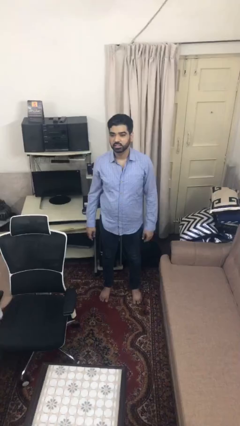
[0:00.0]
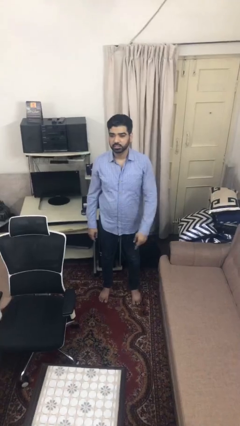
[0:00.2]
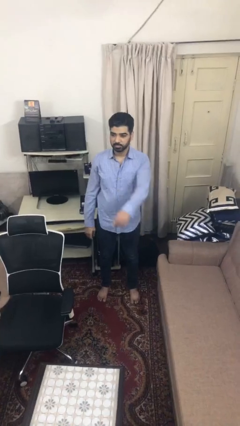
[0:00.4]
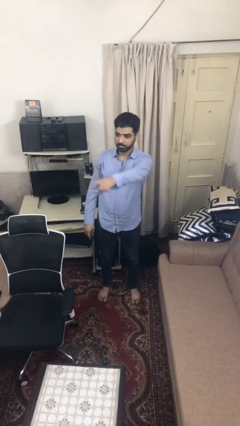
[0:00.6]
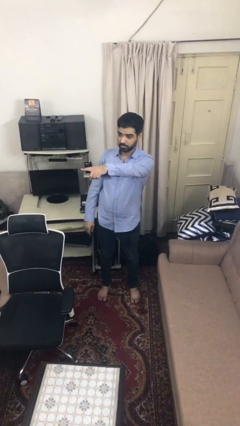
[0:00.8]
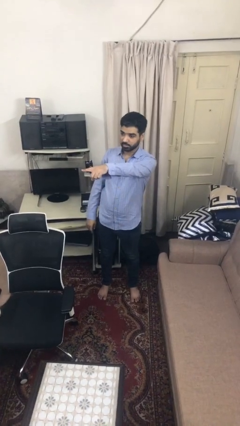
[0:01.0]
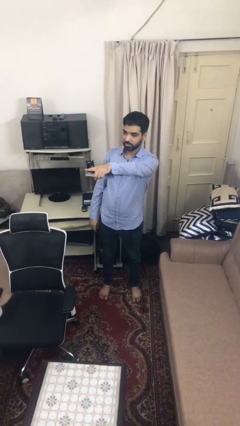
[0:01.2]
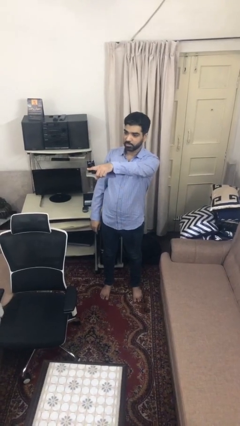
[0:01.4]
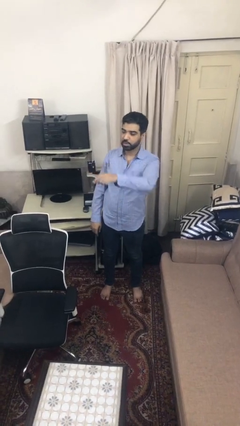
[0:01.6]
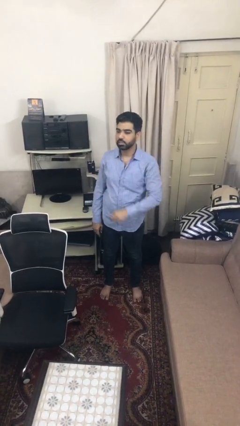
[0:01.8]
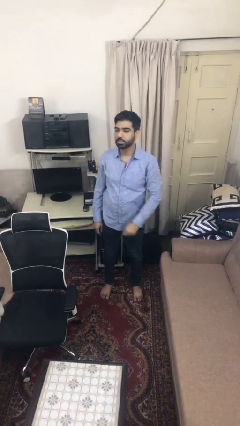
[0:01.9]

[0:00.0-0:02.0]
person points at person

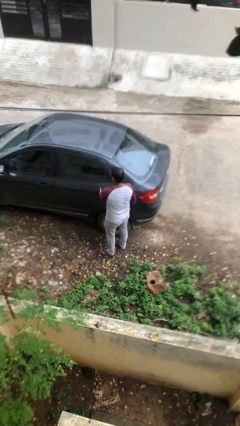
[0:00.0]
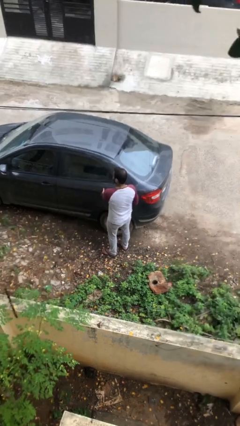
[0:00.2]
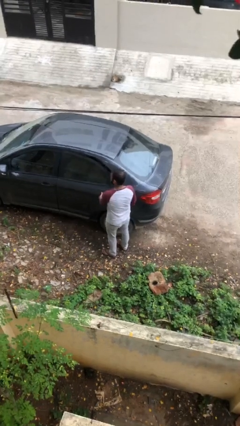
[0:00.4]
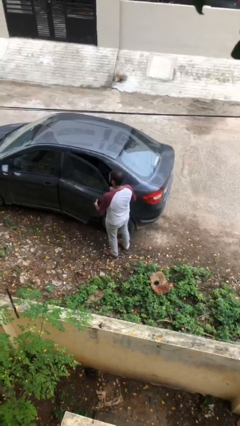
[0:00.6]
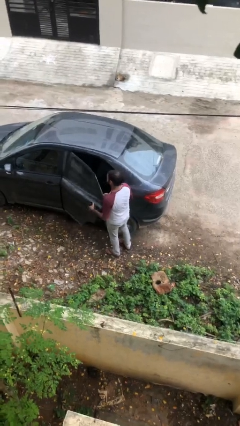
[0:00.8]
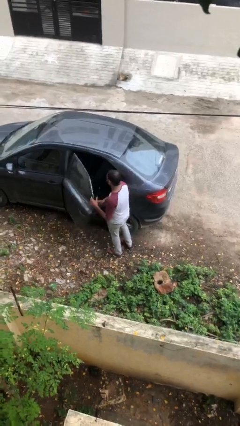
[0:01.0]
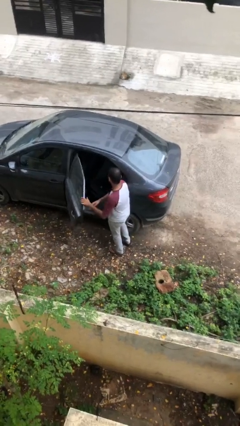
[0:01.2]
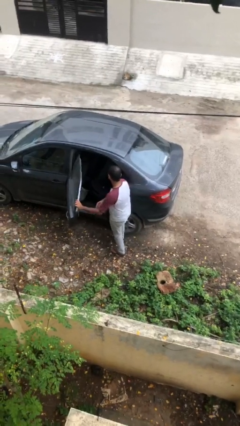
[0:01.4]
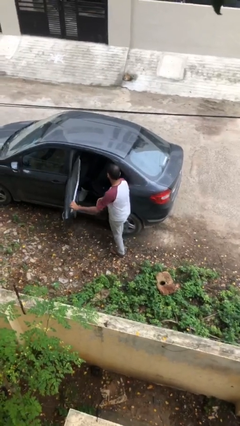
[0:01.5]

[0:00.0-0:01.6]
person opens car door

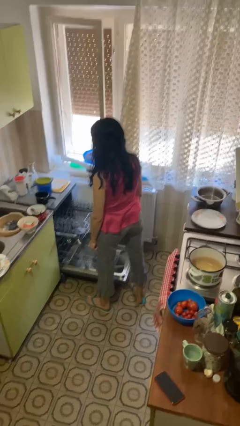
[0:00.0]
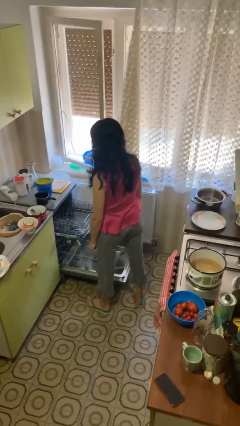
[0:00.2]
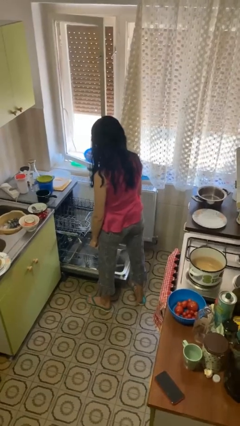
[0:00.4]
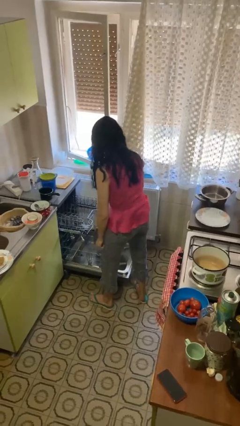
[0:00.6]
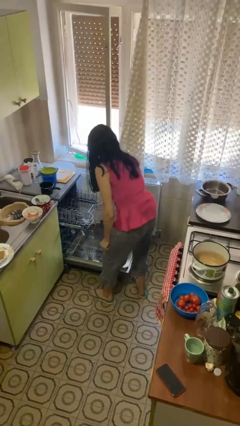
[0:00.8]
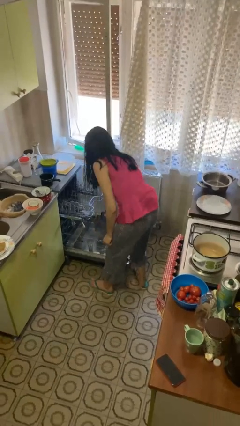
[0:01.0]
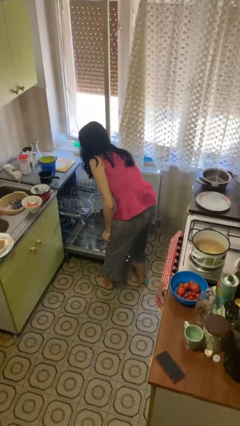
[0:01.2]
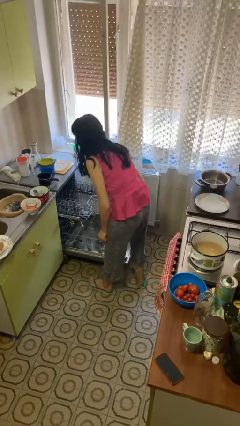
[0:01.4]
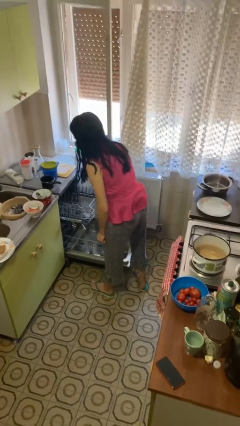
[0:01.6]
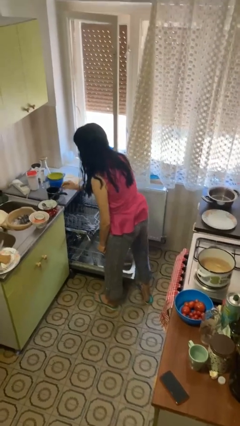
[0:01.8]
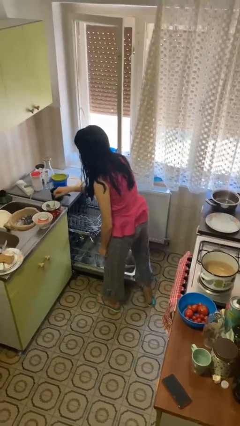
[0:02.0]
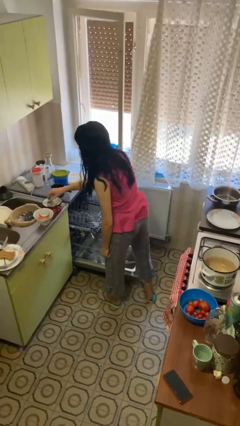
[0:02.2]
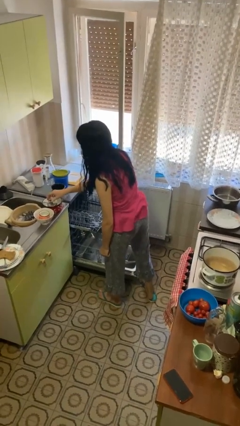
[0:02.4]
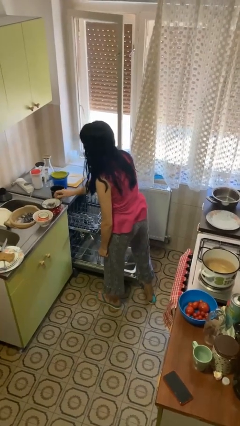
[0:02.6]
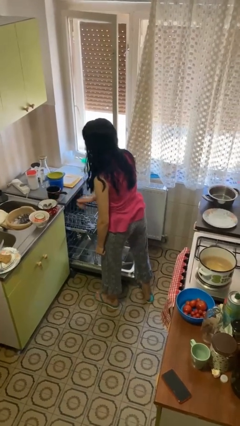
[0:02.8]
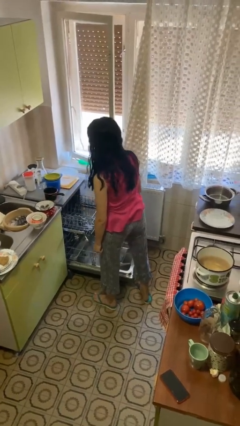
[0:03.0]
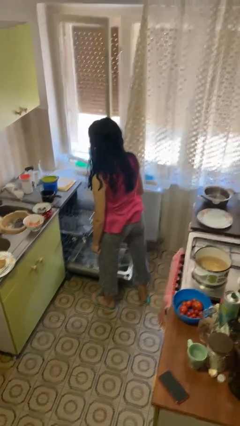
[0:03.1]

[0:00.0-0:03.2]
person unloads dishwasher

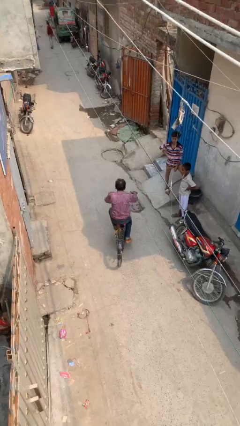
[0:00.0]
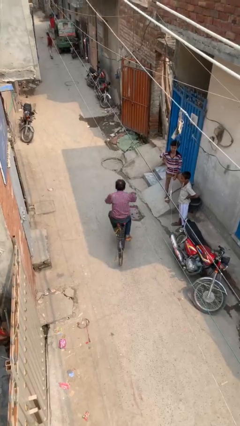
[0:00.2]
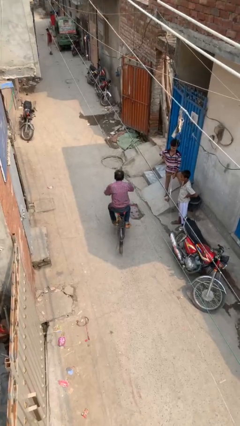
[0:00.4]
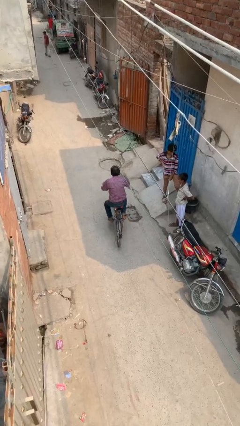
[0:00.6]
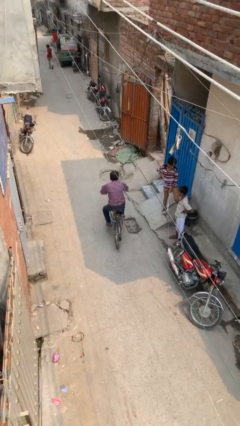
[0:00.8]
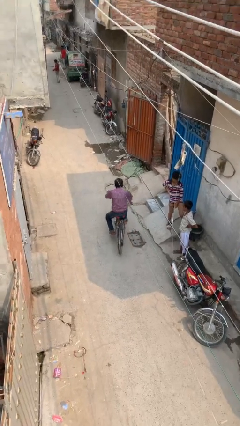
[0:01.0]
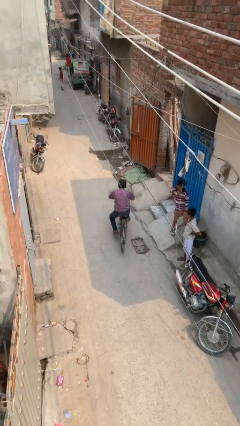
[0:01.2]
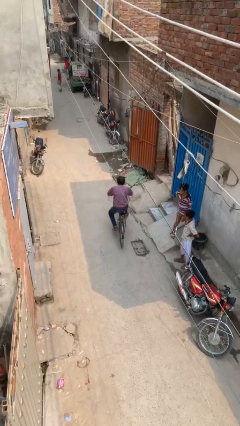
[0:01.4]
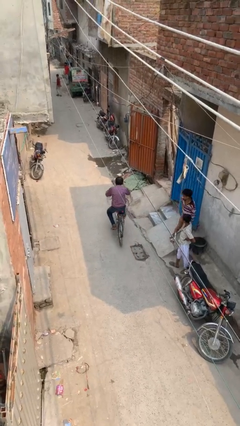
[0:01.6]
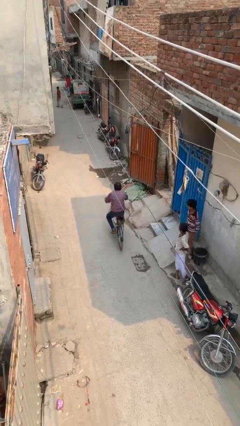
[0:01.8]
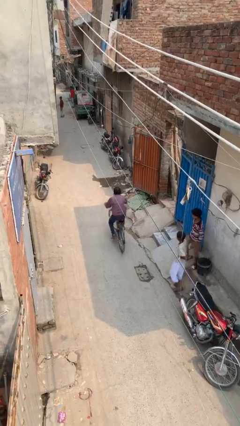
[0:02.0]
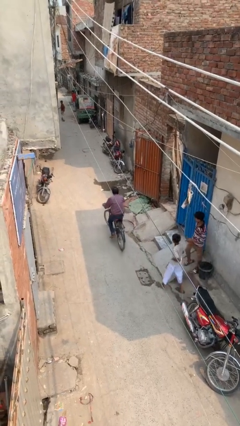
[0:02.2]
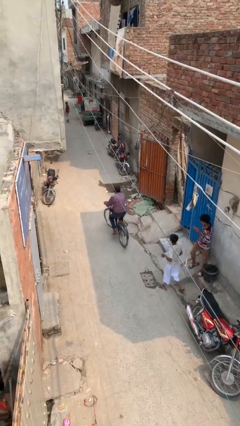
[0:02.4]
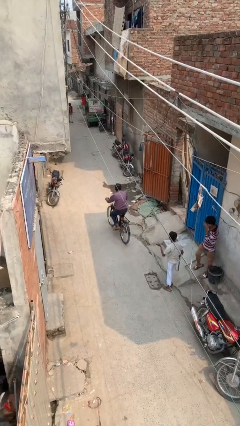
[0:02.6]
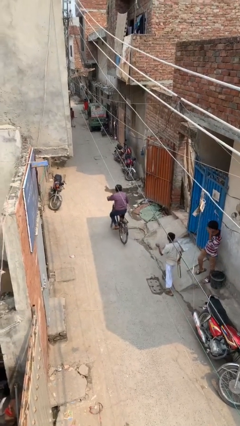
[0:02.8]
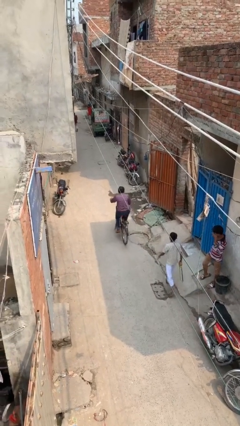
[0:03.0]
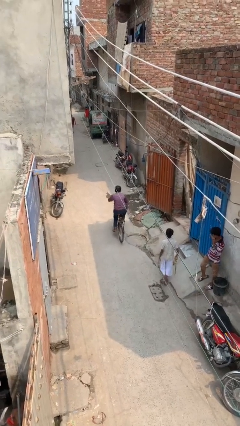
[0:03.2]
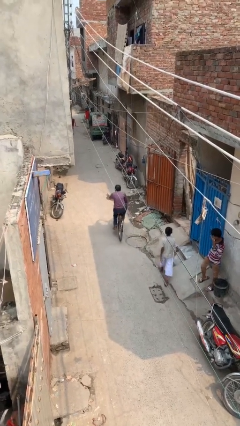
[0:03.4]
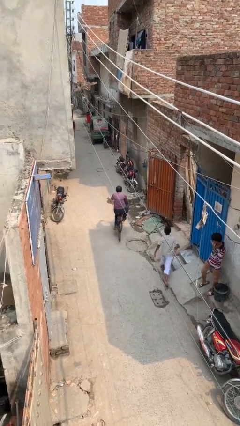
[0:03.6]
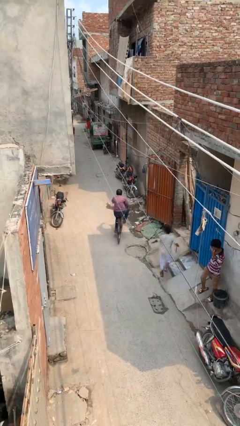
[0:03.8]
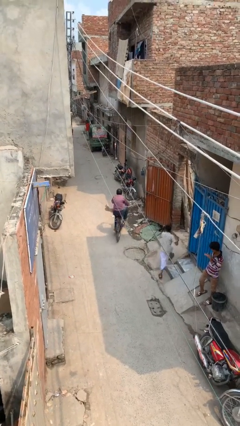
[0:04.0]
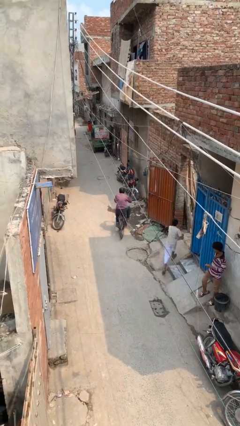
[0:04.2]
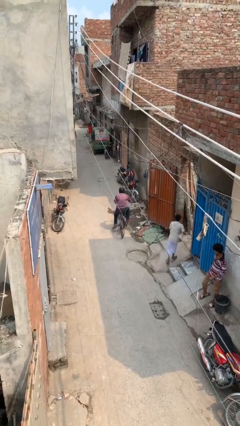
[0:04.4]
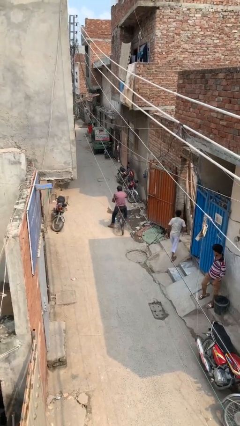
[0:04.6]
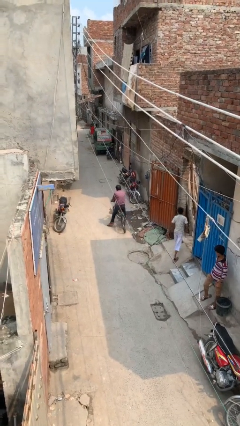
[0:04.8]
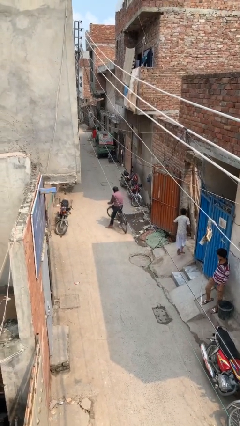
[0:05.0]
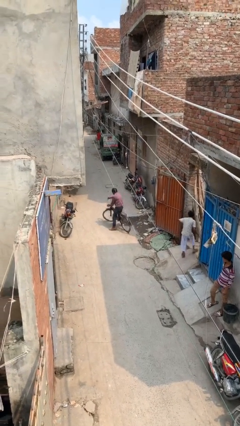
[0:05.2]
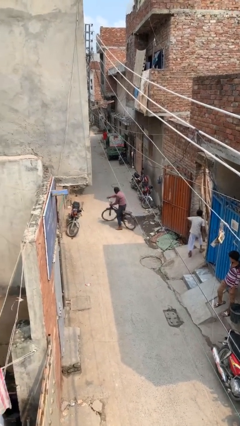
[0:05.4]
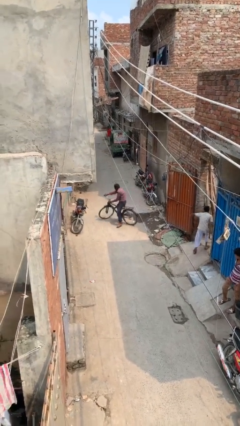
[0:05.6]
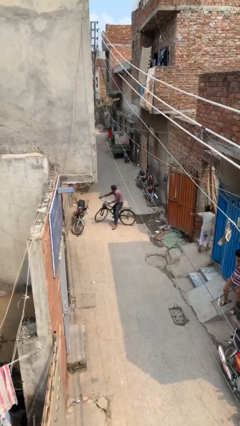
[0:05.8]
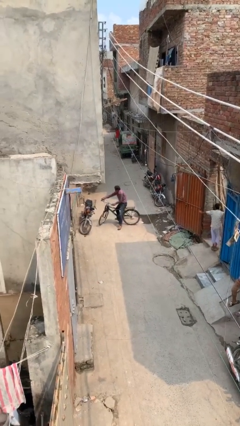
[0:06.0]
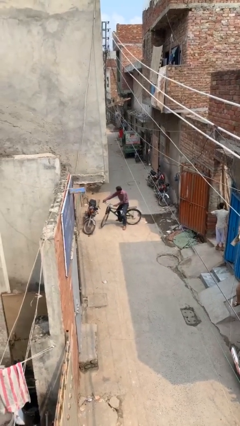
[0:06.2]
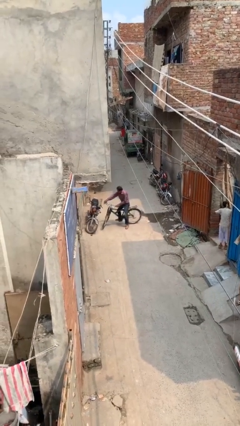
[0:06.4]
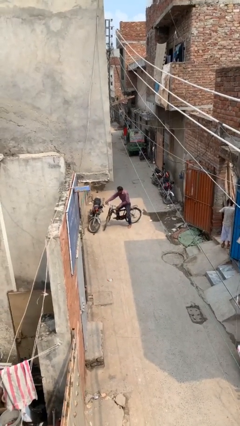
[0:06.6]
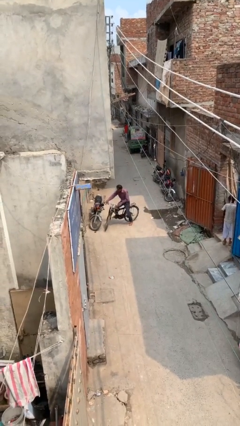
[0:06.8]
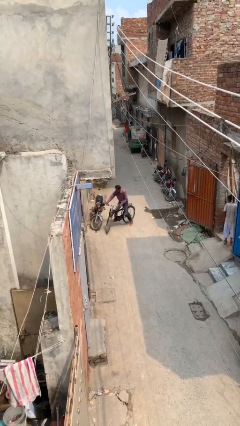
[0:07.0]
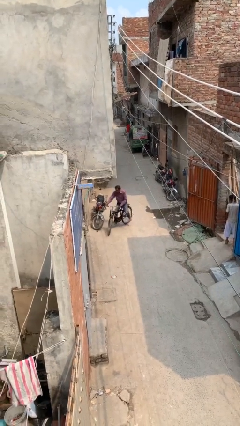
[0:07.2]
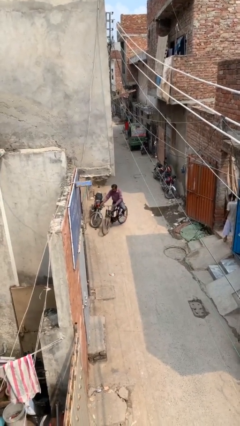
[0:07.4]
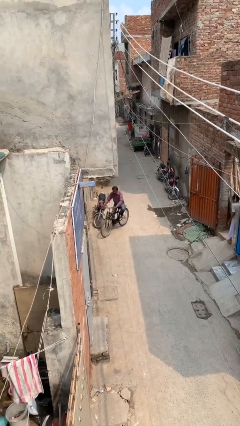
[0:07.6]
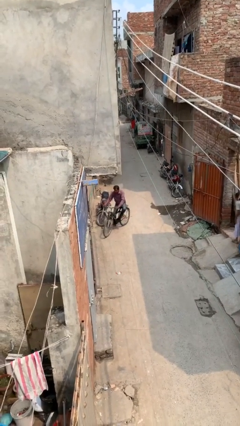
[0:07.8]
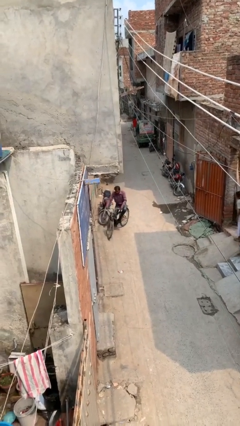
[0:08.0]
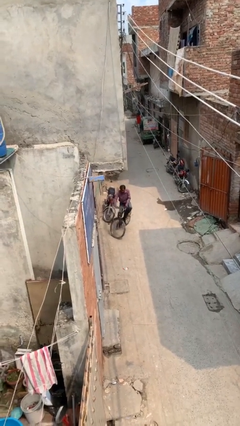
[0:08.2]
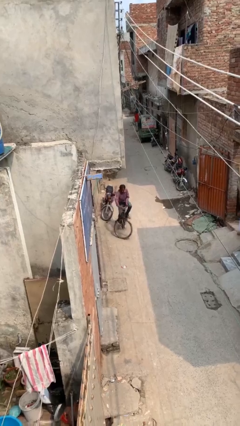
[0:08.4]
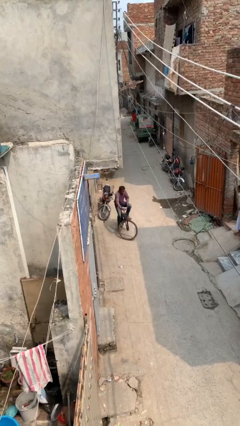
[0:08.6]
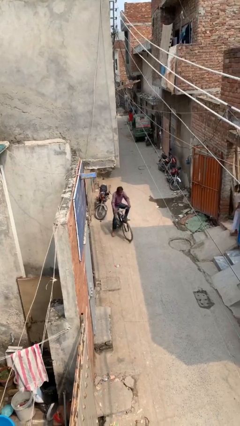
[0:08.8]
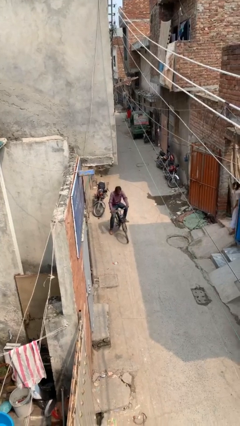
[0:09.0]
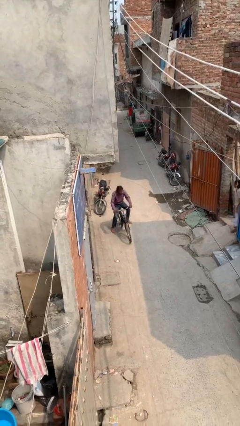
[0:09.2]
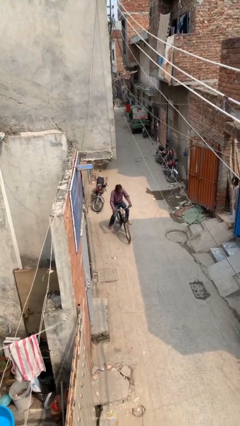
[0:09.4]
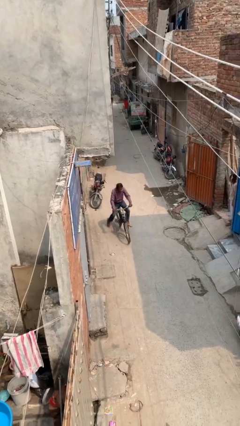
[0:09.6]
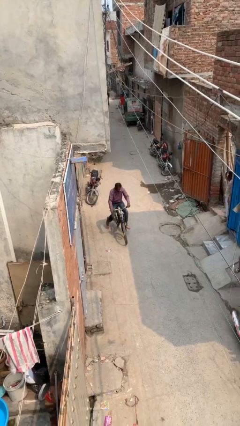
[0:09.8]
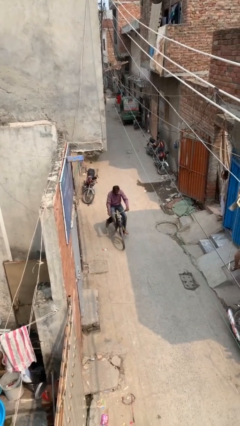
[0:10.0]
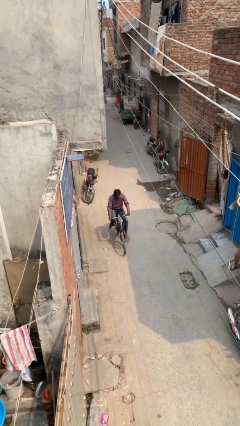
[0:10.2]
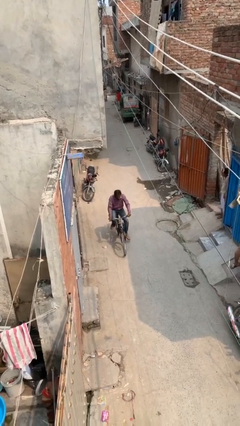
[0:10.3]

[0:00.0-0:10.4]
person rides bicycle

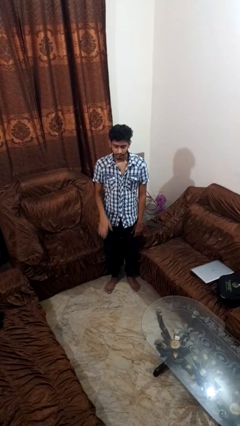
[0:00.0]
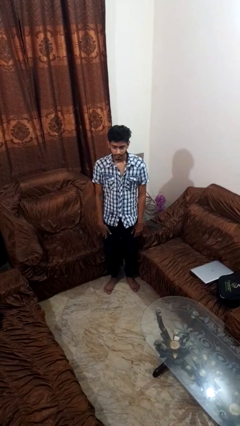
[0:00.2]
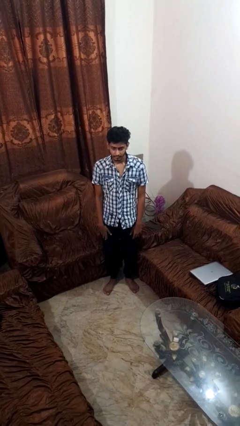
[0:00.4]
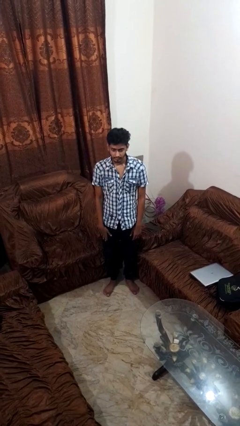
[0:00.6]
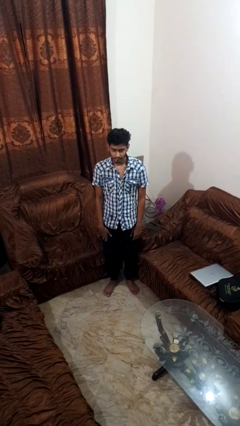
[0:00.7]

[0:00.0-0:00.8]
person gestures lower hand
